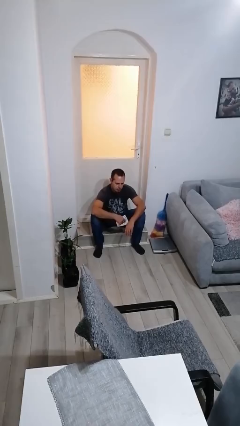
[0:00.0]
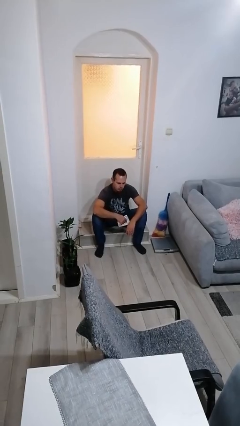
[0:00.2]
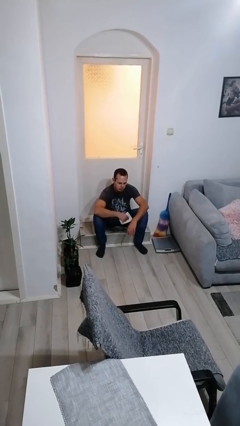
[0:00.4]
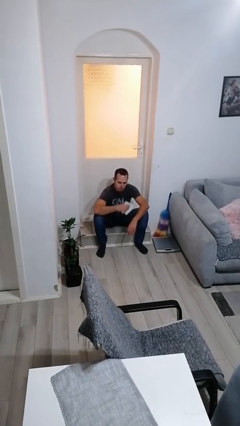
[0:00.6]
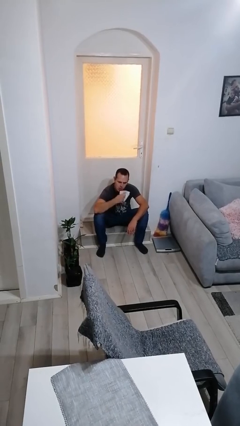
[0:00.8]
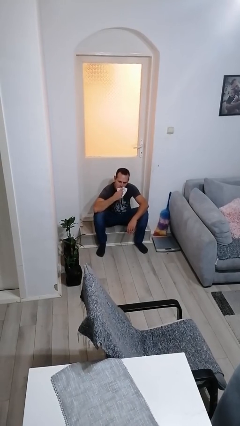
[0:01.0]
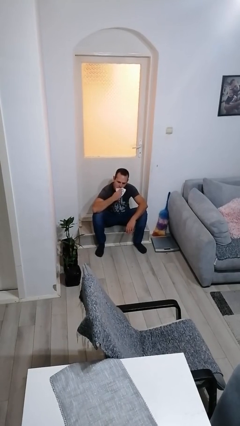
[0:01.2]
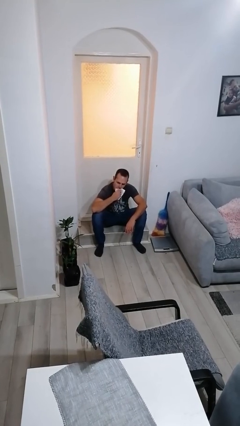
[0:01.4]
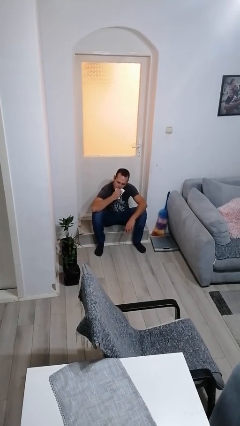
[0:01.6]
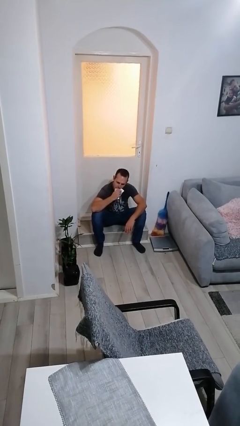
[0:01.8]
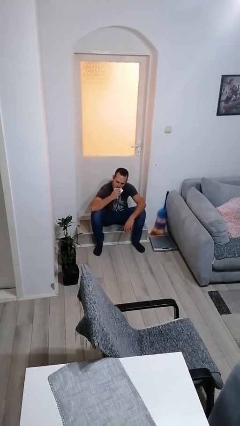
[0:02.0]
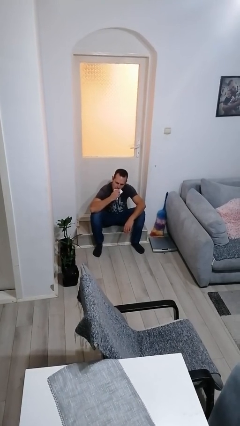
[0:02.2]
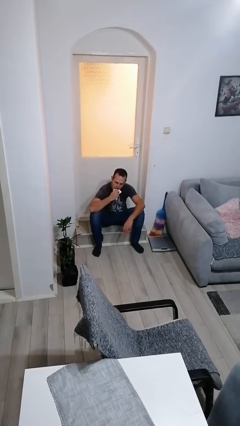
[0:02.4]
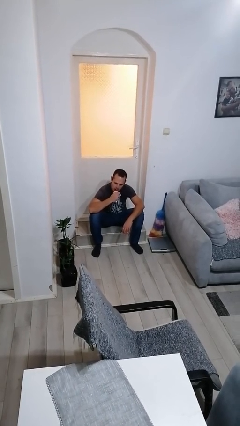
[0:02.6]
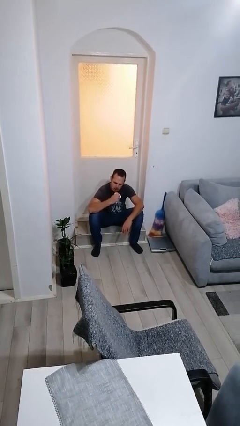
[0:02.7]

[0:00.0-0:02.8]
person wipes mouth with napkin

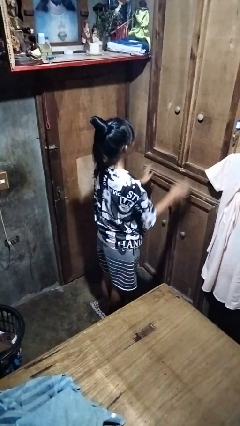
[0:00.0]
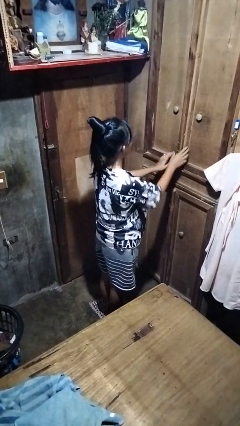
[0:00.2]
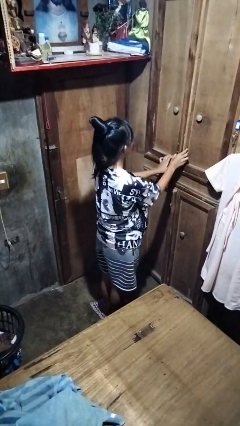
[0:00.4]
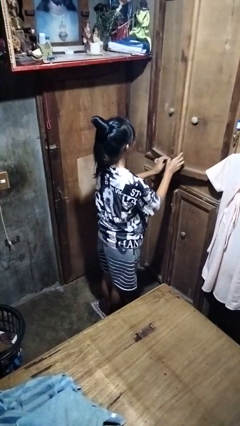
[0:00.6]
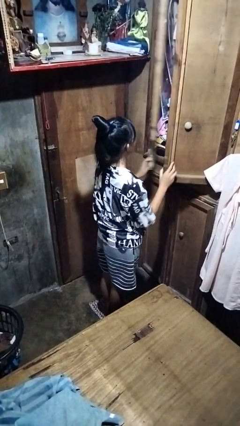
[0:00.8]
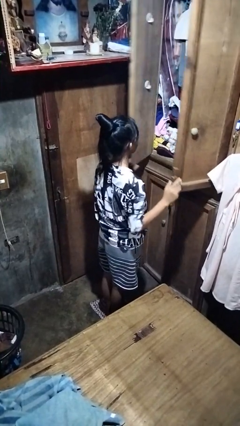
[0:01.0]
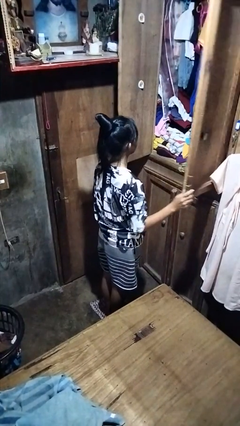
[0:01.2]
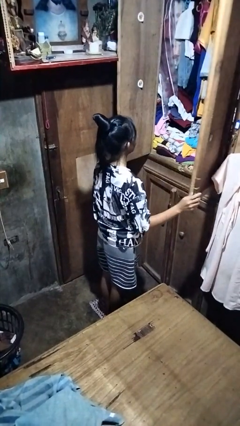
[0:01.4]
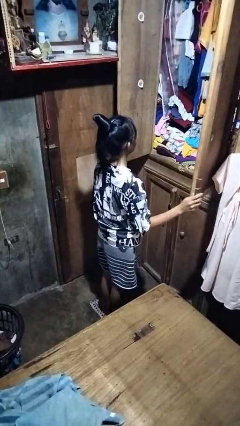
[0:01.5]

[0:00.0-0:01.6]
person opens closet door

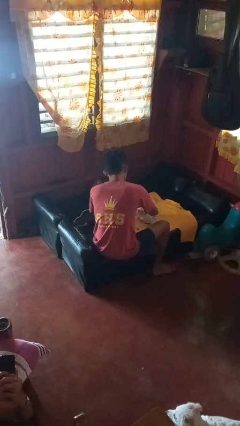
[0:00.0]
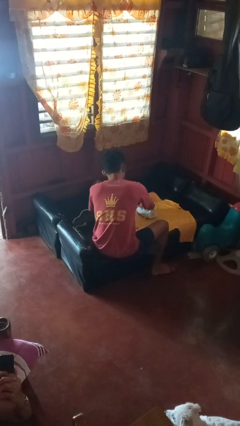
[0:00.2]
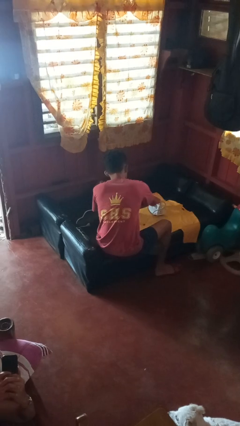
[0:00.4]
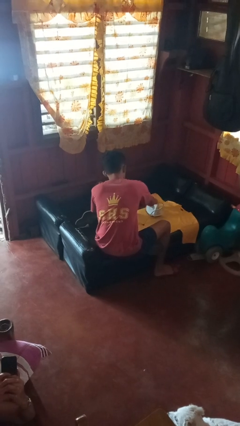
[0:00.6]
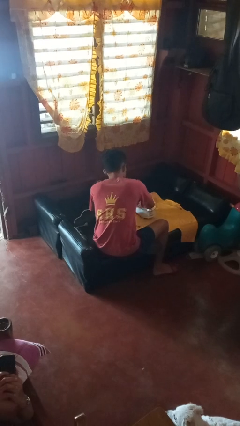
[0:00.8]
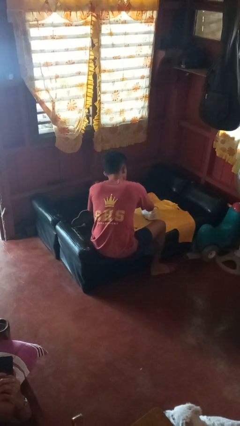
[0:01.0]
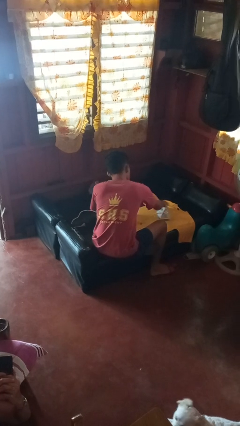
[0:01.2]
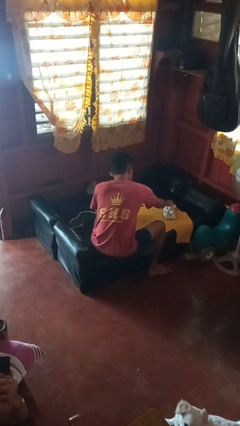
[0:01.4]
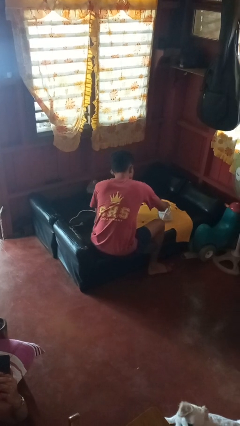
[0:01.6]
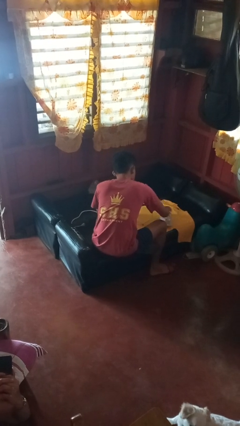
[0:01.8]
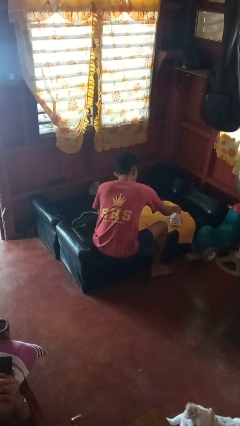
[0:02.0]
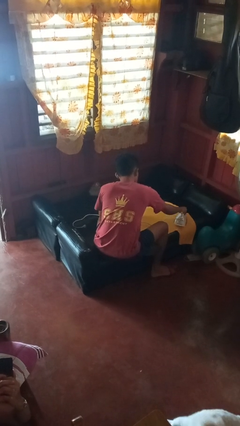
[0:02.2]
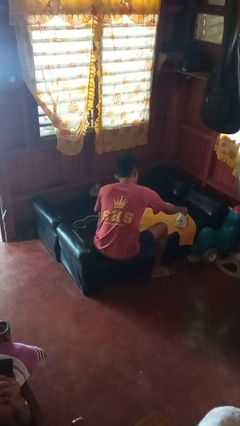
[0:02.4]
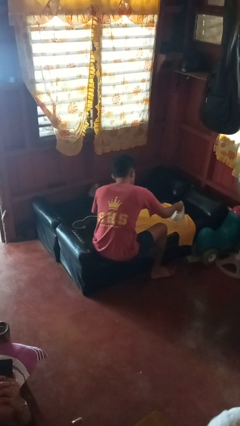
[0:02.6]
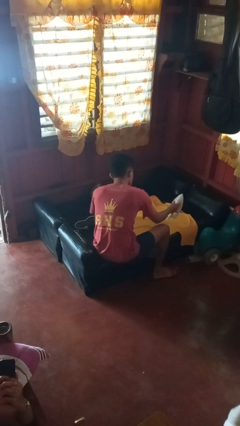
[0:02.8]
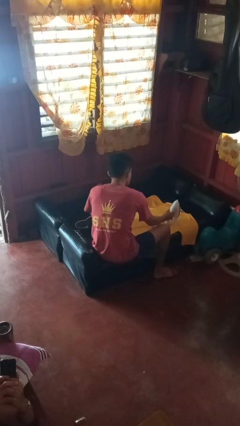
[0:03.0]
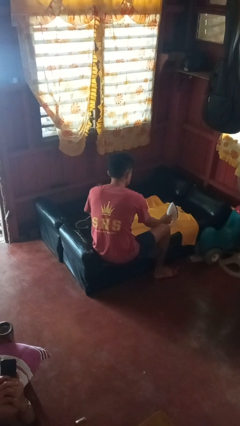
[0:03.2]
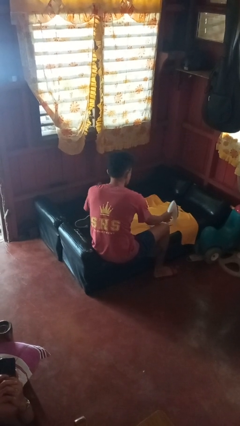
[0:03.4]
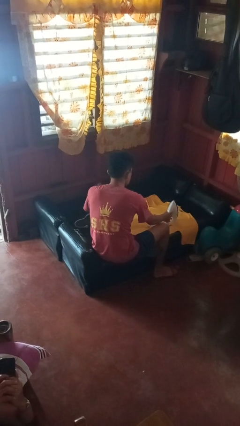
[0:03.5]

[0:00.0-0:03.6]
person irons clothes

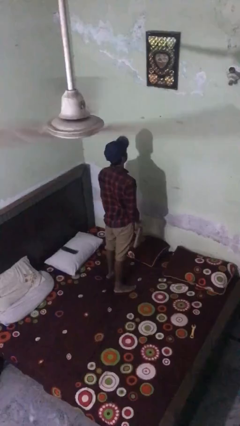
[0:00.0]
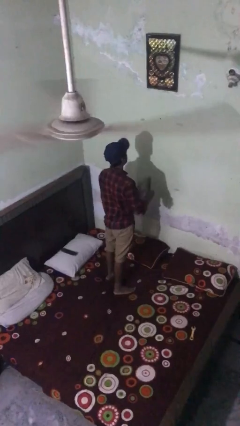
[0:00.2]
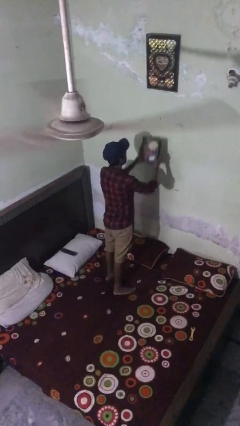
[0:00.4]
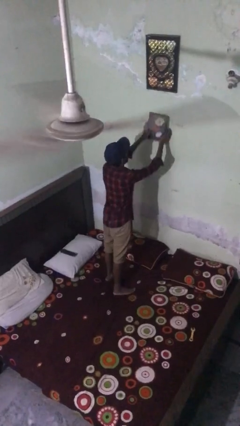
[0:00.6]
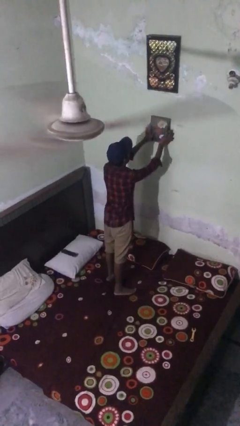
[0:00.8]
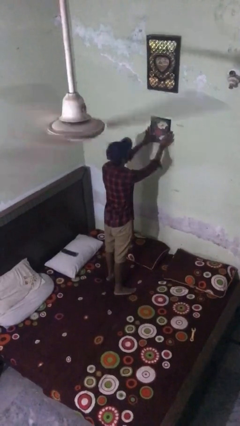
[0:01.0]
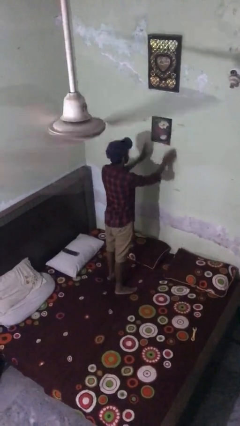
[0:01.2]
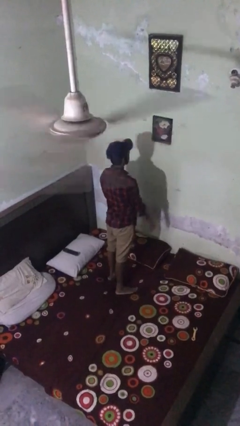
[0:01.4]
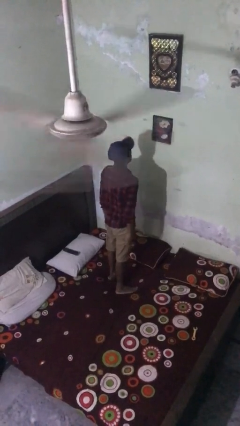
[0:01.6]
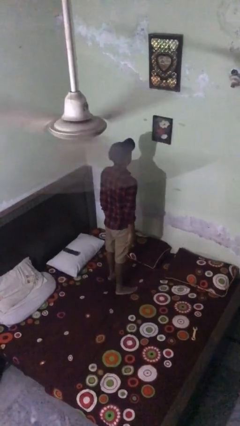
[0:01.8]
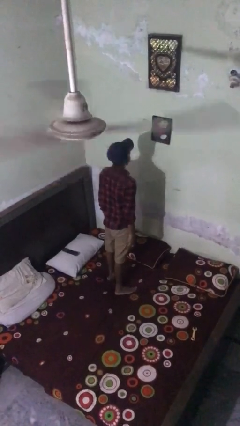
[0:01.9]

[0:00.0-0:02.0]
person puts up picture frame

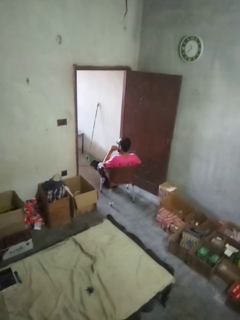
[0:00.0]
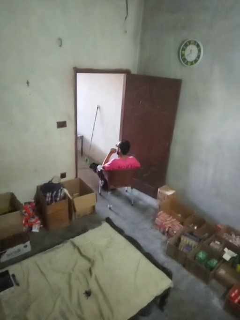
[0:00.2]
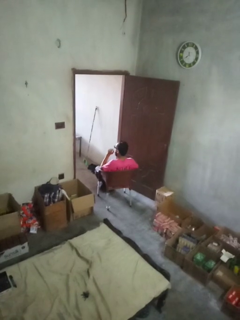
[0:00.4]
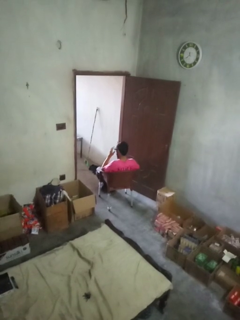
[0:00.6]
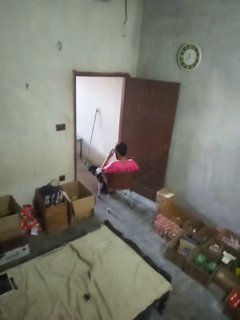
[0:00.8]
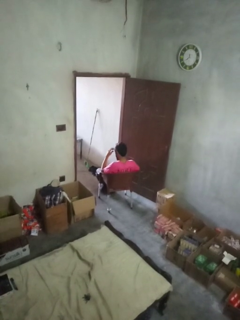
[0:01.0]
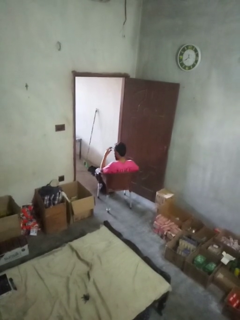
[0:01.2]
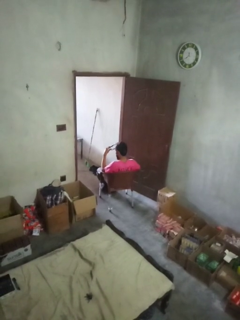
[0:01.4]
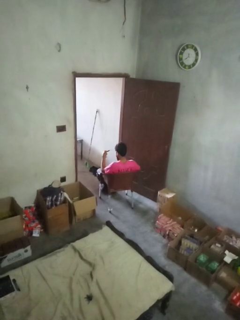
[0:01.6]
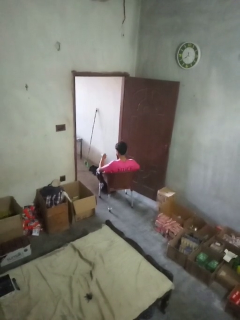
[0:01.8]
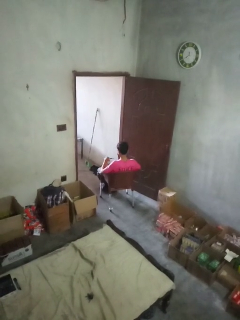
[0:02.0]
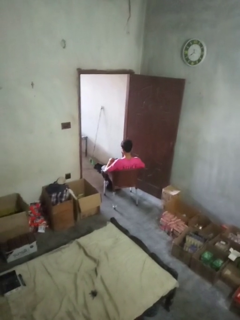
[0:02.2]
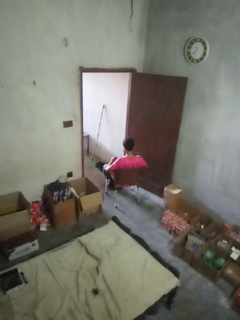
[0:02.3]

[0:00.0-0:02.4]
person takes off glasses

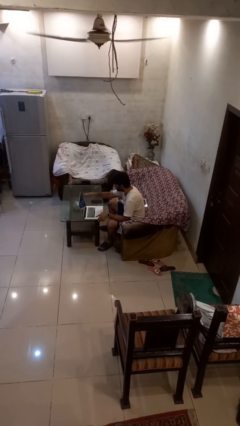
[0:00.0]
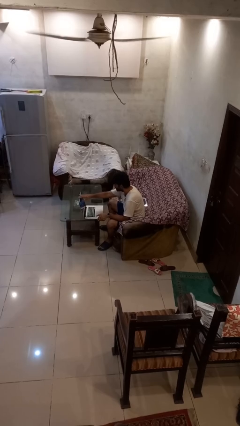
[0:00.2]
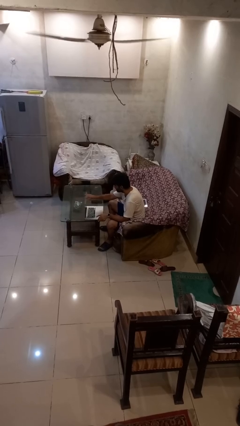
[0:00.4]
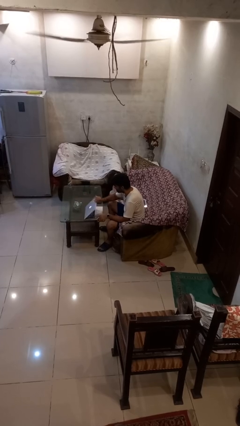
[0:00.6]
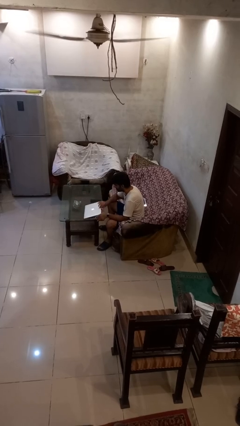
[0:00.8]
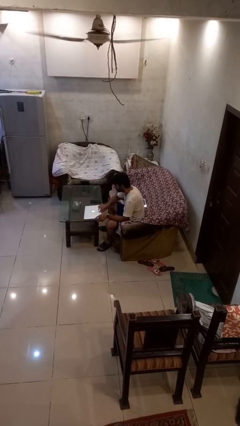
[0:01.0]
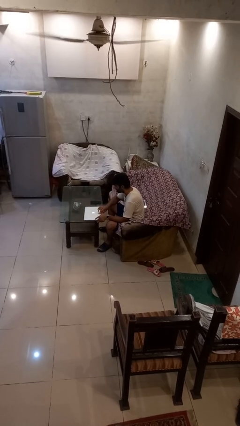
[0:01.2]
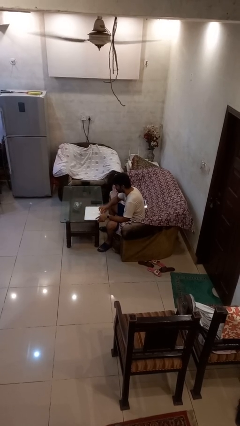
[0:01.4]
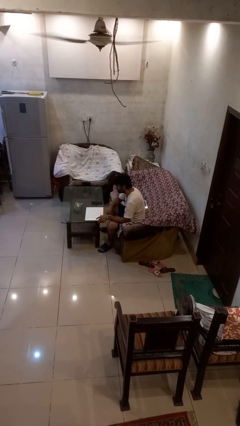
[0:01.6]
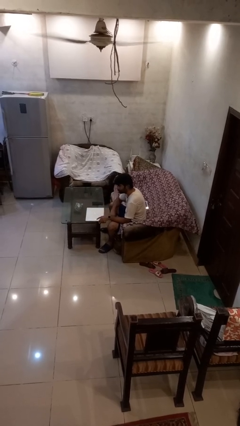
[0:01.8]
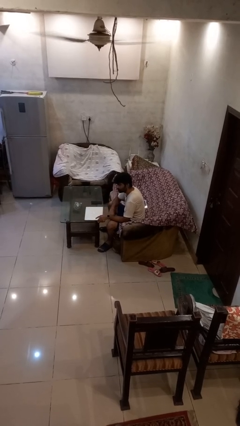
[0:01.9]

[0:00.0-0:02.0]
person closes laptop

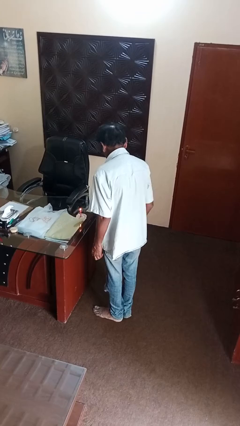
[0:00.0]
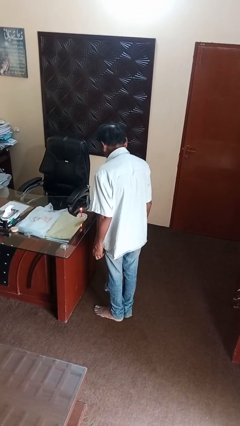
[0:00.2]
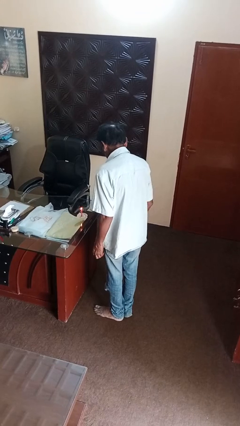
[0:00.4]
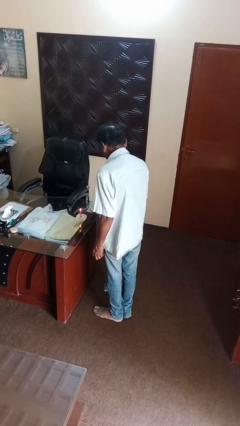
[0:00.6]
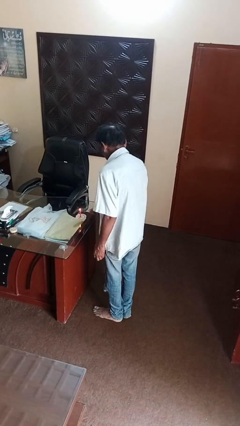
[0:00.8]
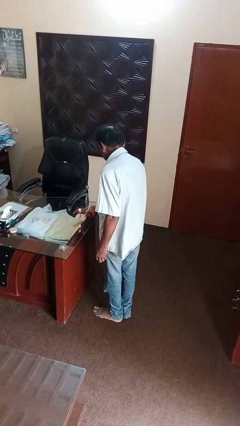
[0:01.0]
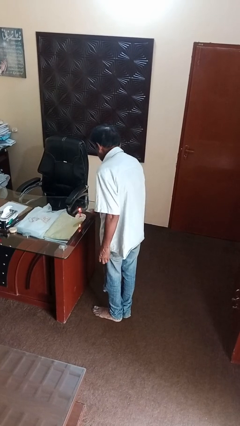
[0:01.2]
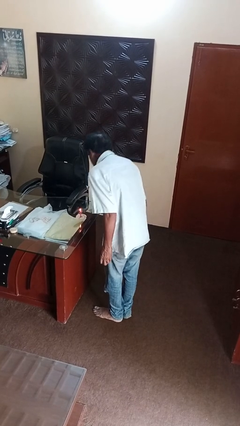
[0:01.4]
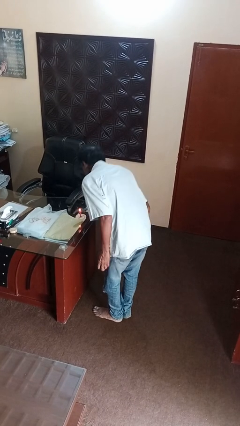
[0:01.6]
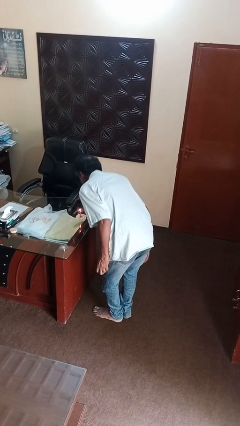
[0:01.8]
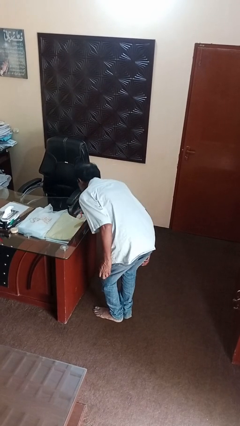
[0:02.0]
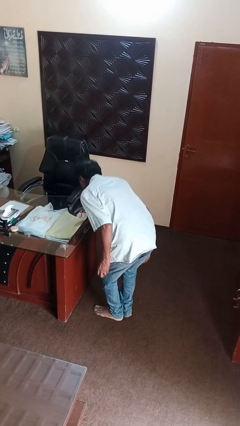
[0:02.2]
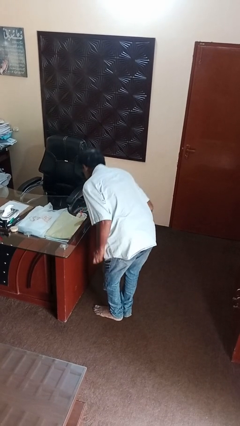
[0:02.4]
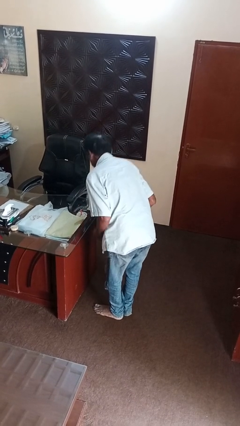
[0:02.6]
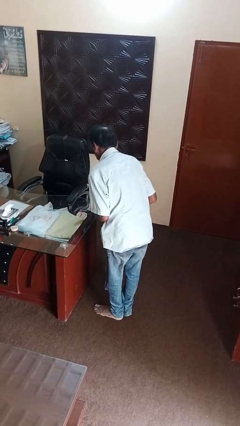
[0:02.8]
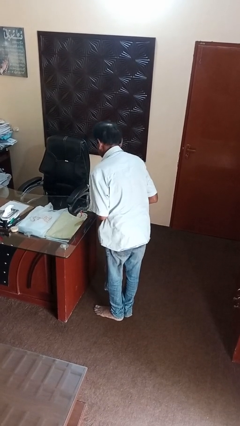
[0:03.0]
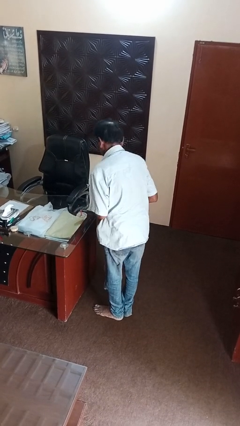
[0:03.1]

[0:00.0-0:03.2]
person extinguishes candle
